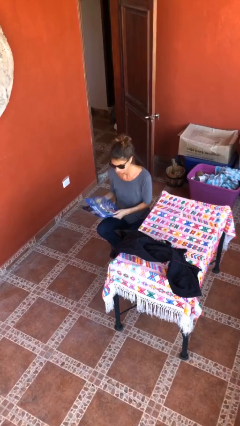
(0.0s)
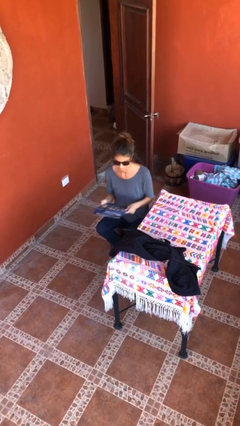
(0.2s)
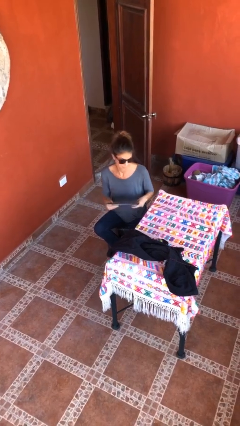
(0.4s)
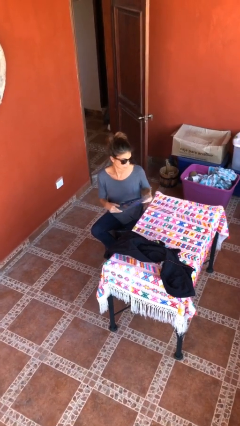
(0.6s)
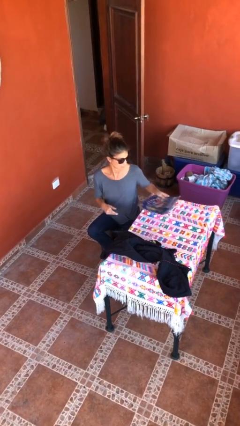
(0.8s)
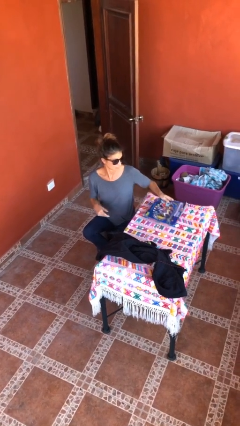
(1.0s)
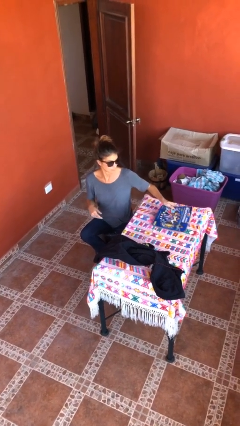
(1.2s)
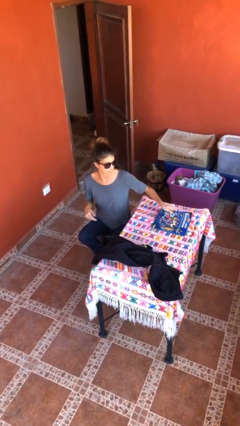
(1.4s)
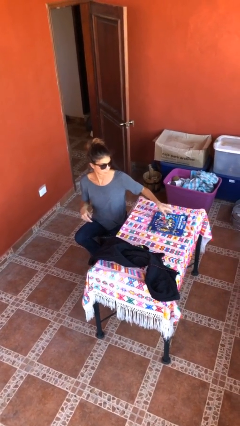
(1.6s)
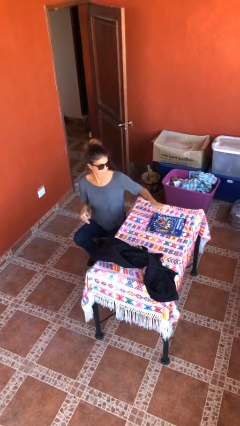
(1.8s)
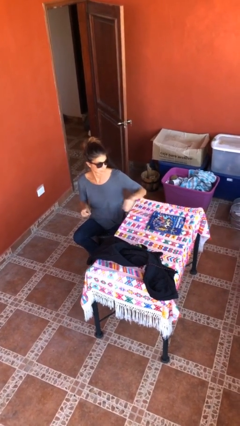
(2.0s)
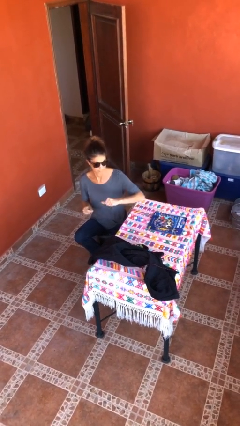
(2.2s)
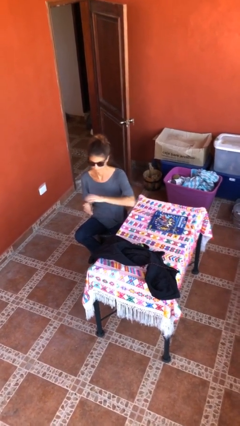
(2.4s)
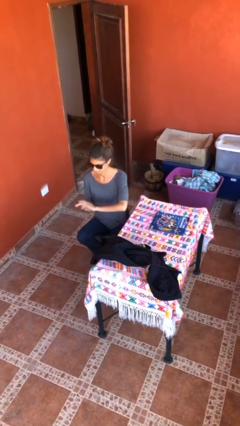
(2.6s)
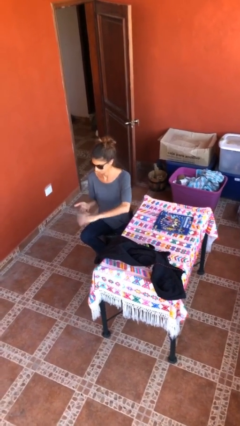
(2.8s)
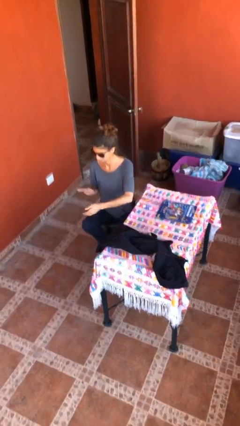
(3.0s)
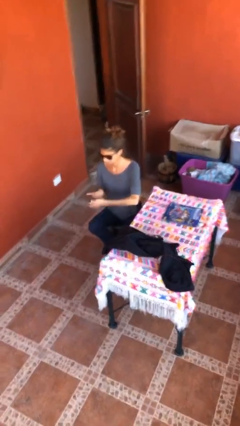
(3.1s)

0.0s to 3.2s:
person puts down object on table

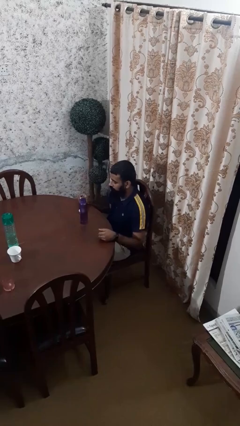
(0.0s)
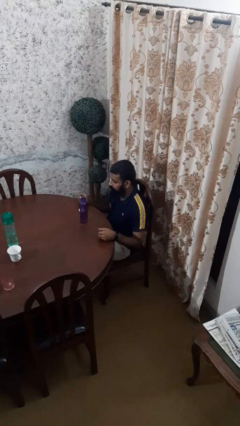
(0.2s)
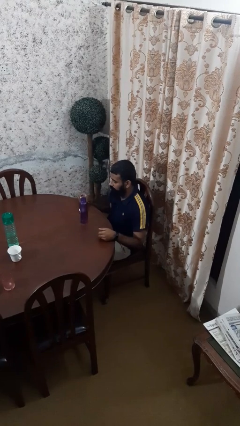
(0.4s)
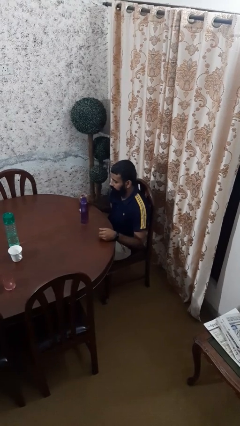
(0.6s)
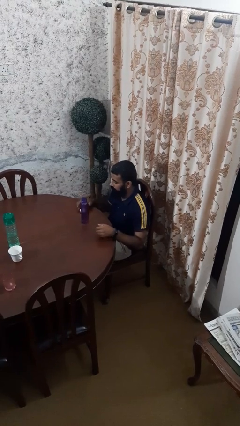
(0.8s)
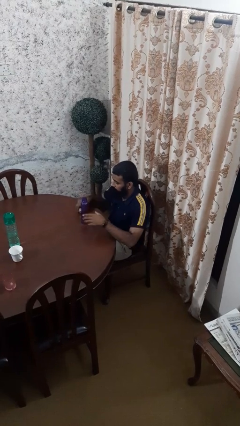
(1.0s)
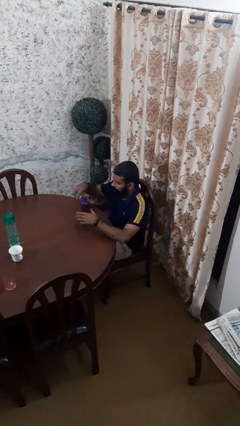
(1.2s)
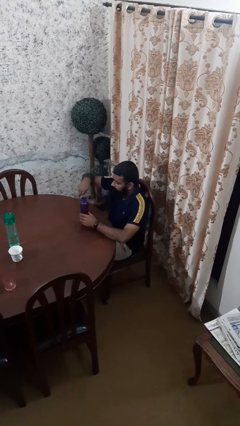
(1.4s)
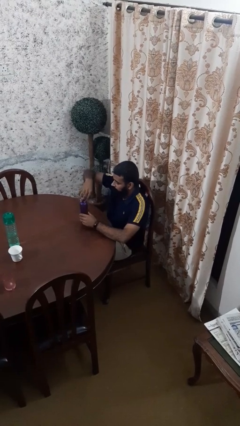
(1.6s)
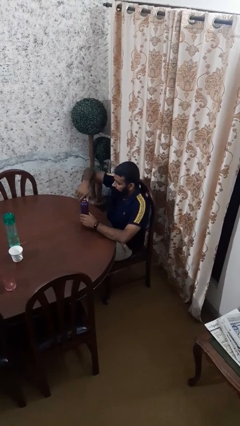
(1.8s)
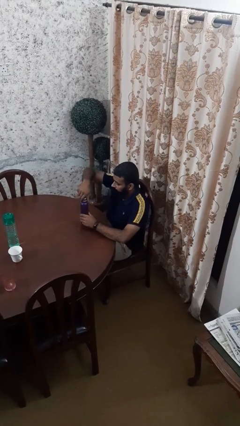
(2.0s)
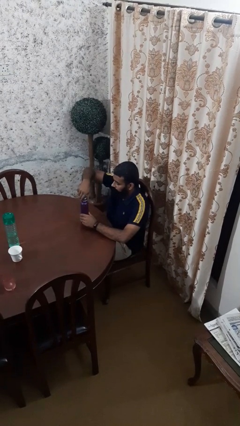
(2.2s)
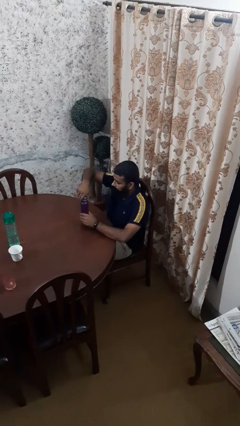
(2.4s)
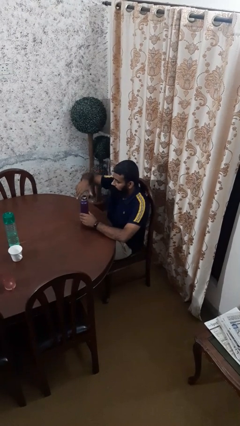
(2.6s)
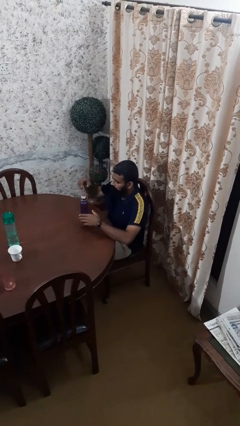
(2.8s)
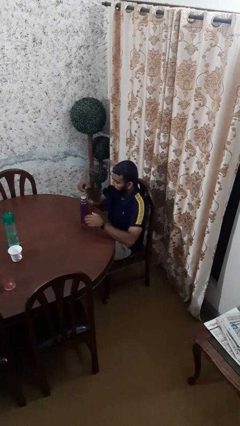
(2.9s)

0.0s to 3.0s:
person screws lid to bottle

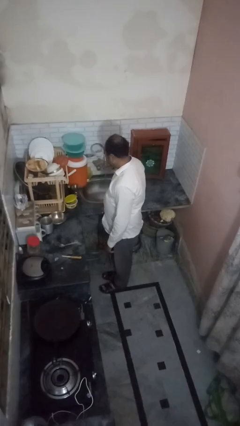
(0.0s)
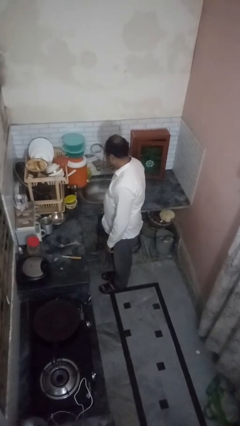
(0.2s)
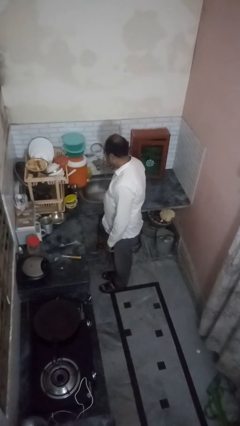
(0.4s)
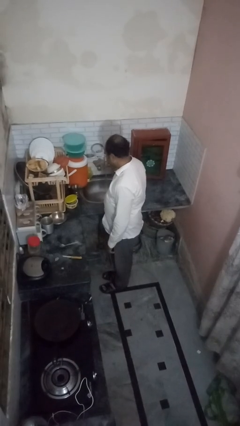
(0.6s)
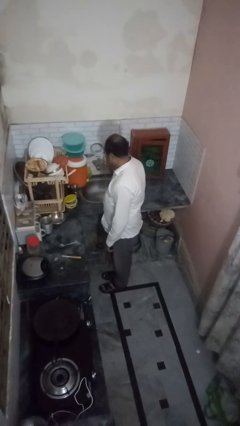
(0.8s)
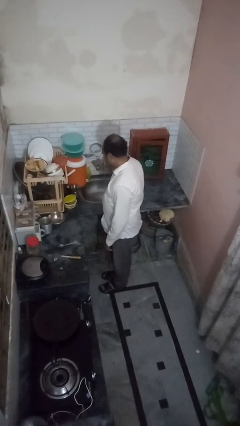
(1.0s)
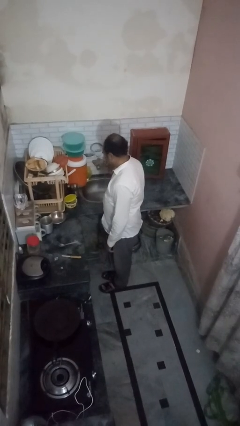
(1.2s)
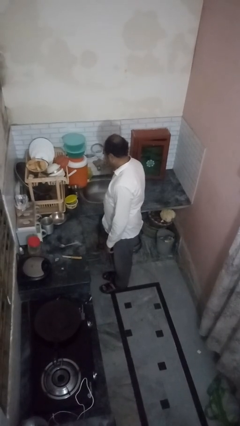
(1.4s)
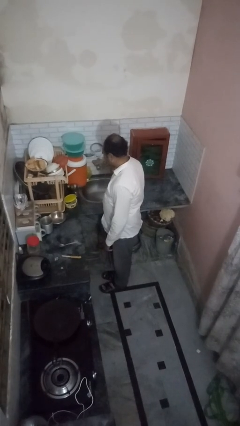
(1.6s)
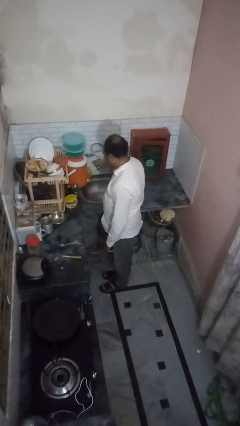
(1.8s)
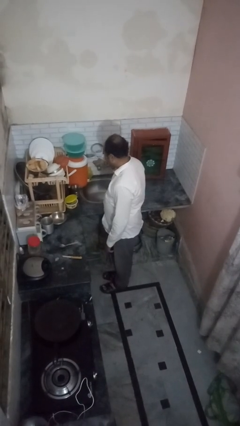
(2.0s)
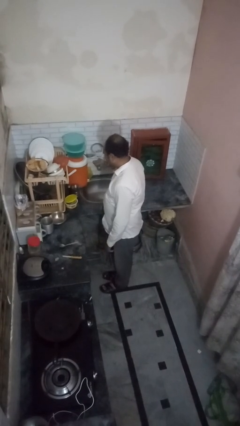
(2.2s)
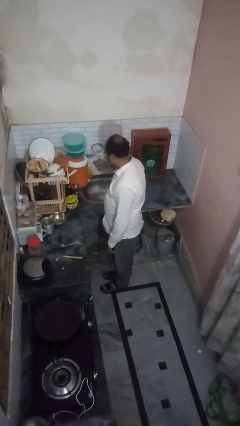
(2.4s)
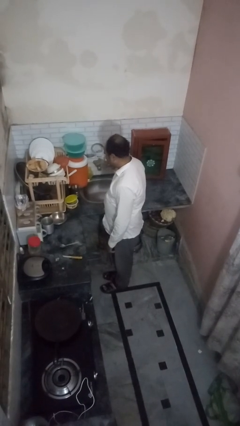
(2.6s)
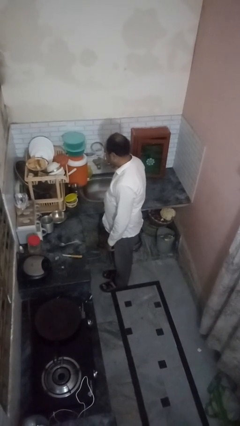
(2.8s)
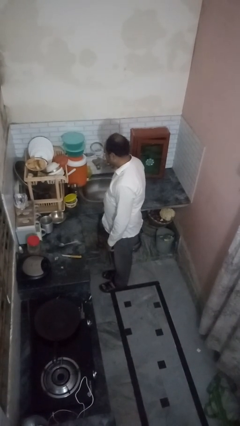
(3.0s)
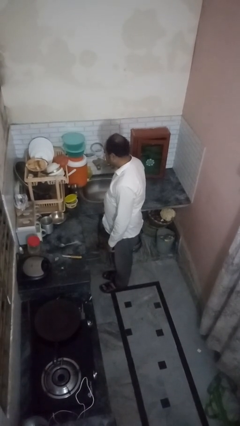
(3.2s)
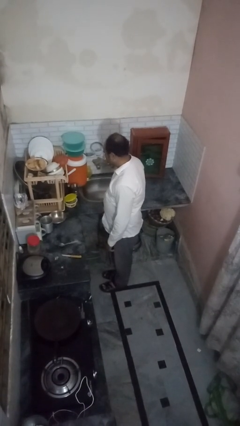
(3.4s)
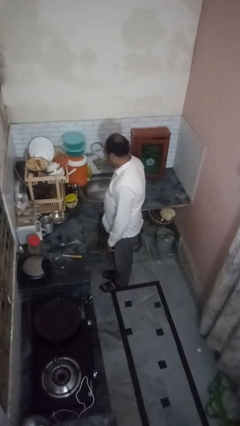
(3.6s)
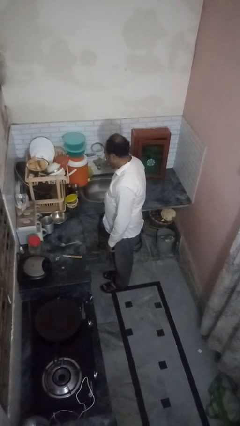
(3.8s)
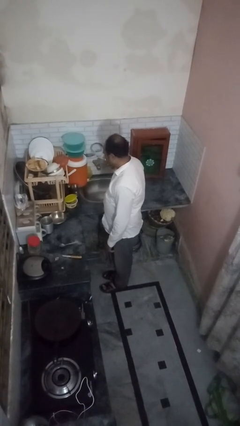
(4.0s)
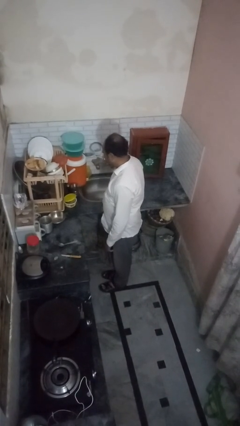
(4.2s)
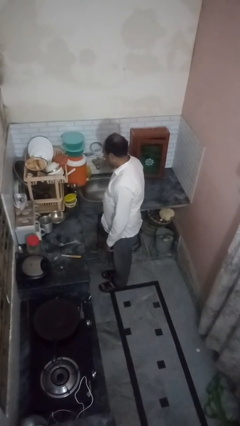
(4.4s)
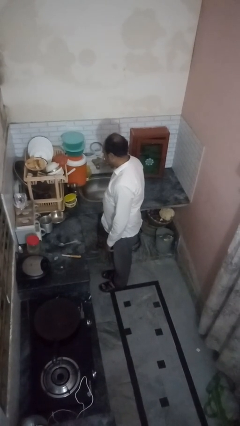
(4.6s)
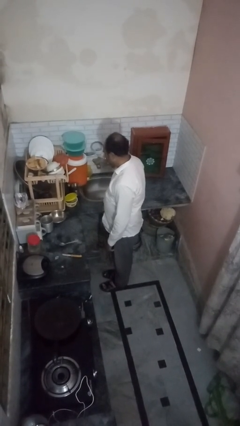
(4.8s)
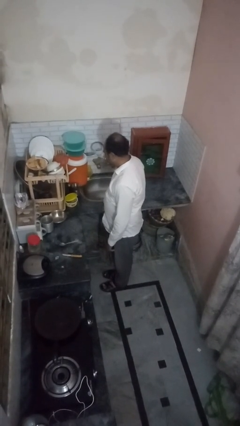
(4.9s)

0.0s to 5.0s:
person turns off faucet

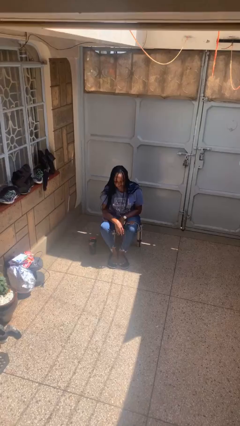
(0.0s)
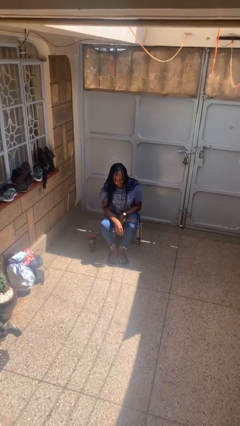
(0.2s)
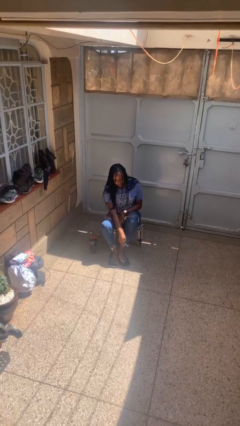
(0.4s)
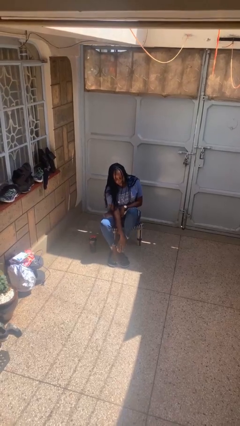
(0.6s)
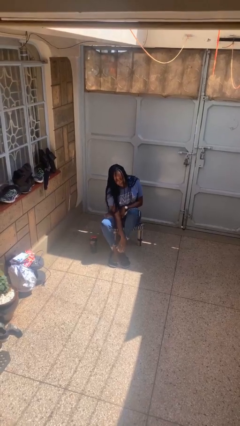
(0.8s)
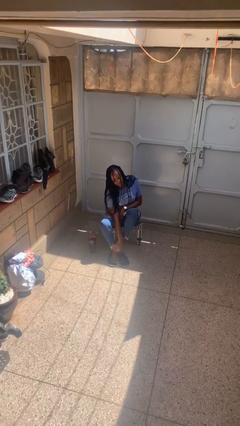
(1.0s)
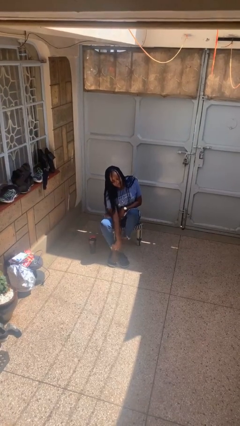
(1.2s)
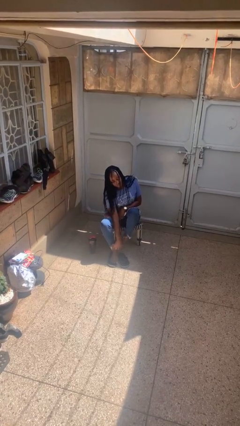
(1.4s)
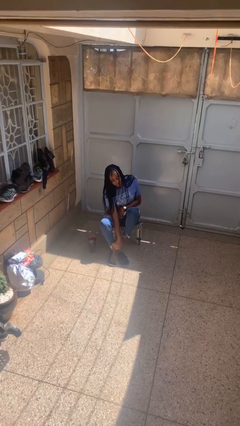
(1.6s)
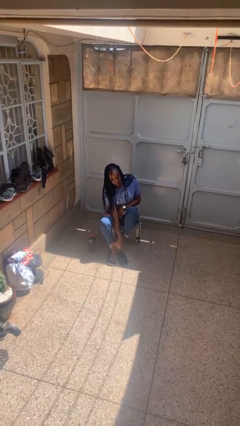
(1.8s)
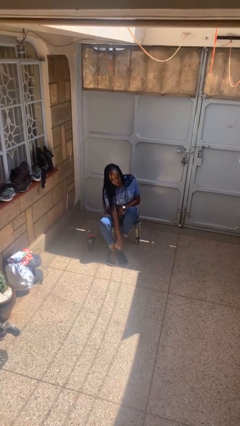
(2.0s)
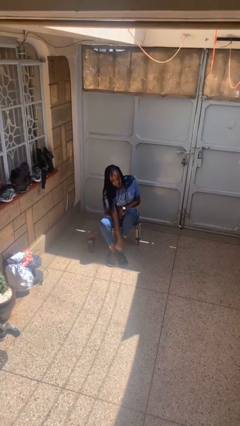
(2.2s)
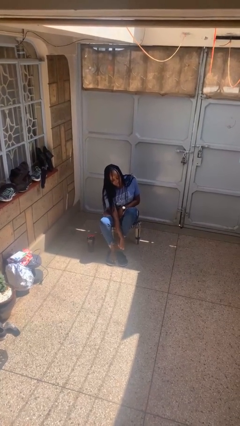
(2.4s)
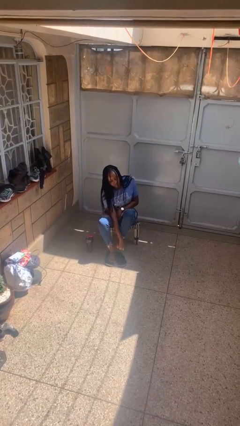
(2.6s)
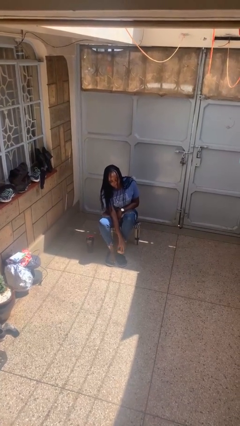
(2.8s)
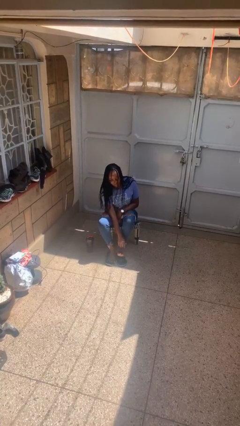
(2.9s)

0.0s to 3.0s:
person rubs foot

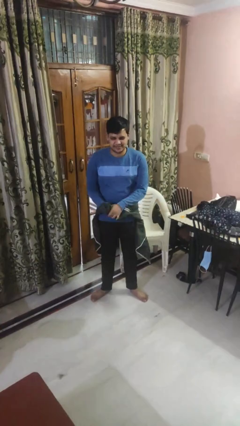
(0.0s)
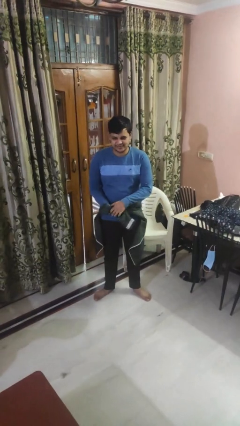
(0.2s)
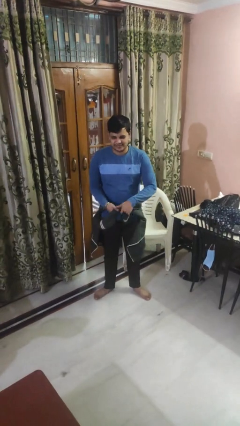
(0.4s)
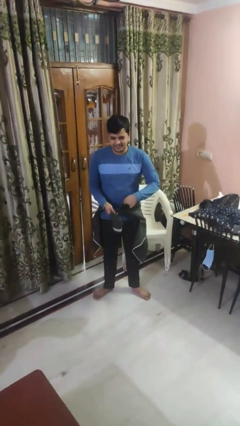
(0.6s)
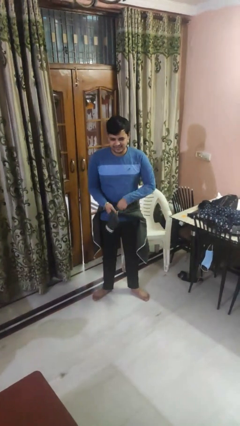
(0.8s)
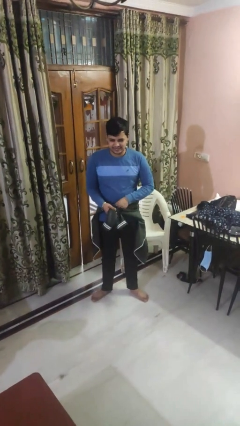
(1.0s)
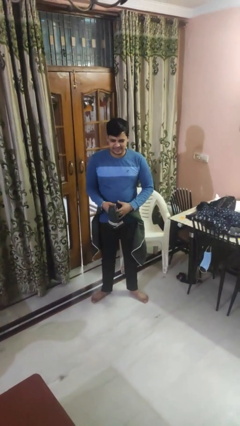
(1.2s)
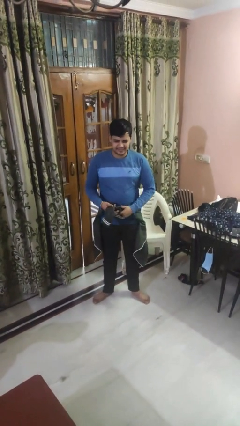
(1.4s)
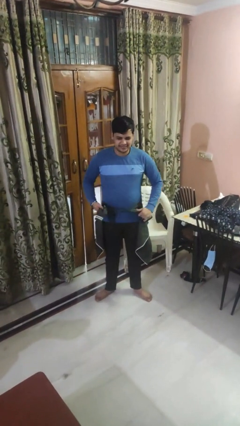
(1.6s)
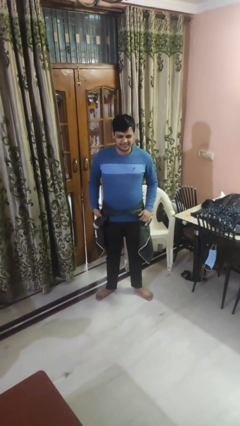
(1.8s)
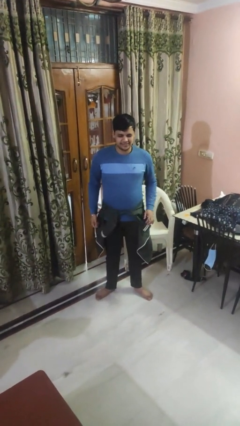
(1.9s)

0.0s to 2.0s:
person ties jacket around waist

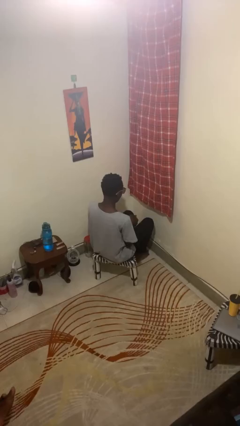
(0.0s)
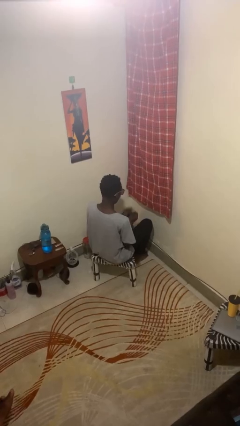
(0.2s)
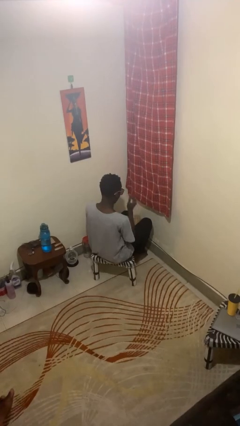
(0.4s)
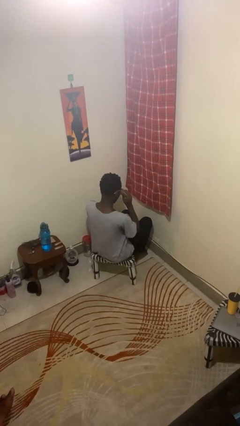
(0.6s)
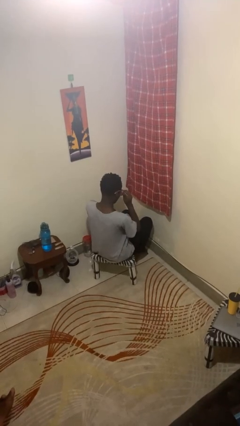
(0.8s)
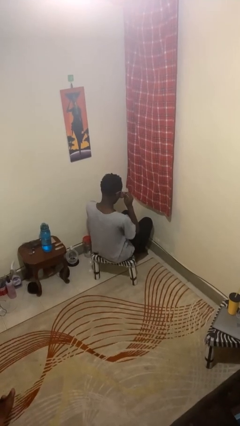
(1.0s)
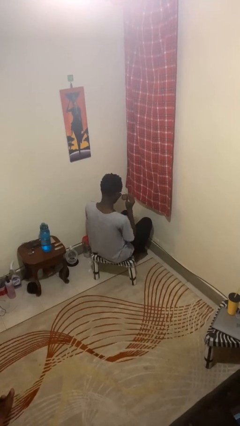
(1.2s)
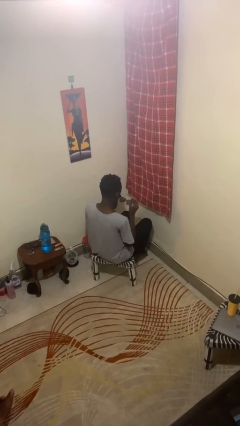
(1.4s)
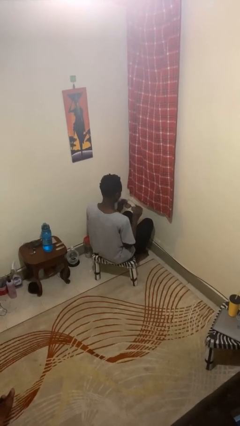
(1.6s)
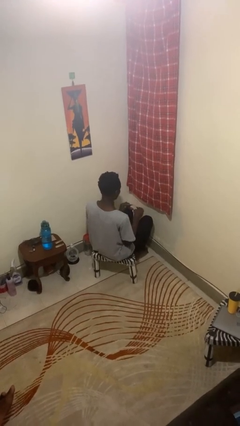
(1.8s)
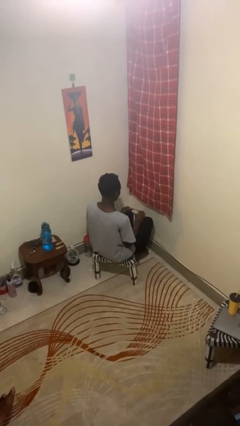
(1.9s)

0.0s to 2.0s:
person takes off glasses
